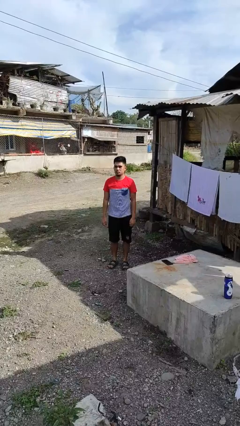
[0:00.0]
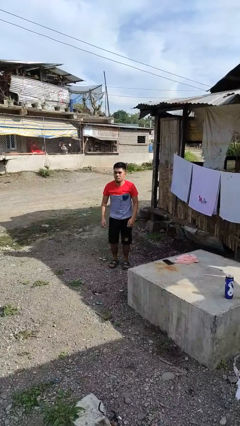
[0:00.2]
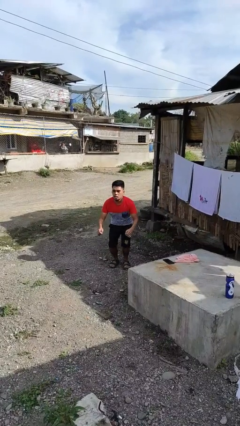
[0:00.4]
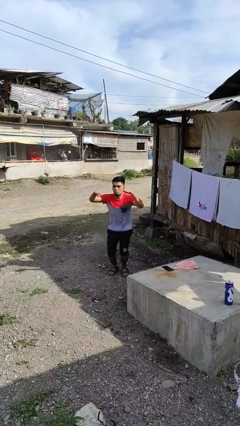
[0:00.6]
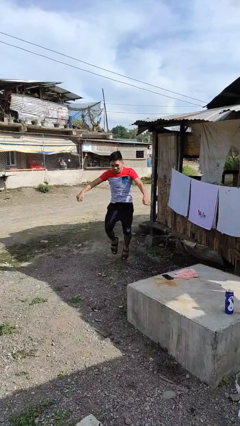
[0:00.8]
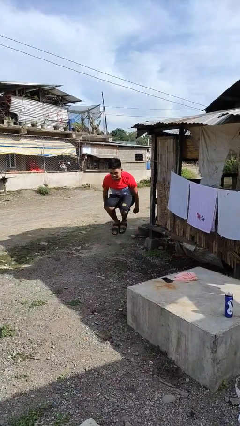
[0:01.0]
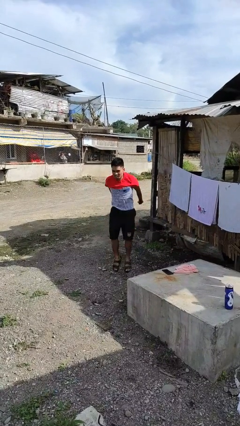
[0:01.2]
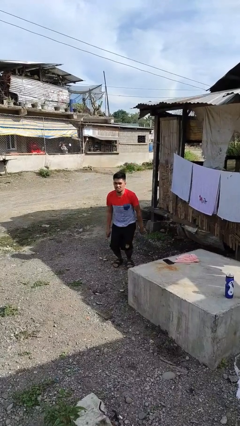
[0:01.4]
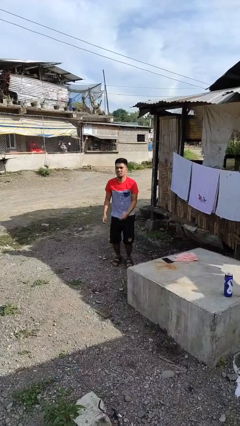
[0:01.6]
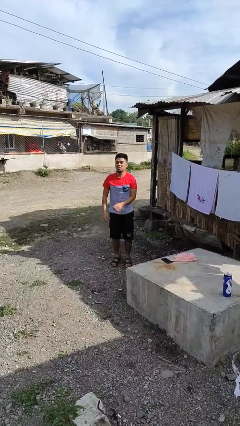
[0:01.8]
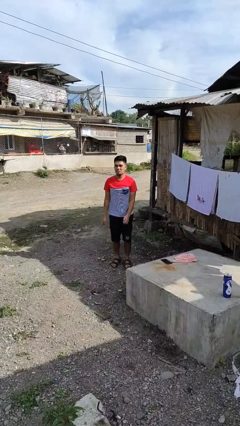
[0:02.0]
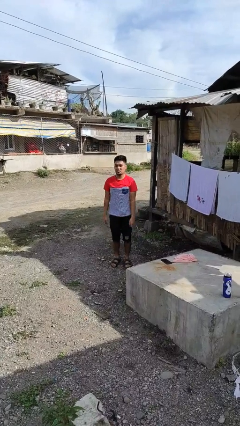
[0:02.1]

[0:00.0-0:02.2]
person jumps

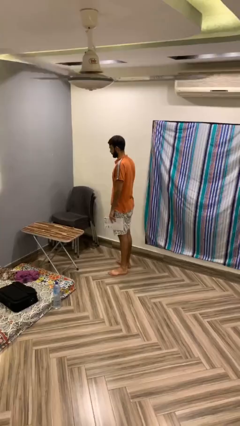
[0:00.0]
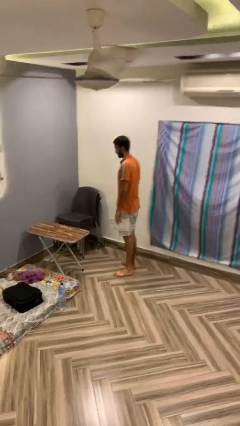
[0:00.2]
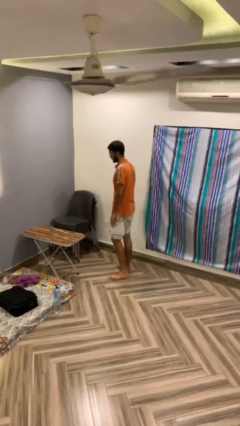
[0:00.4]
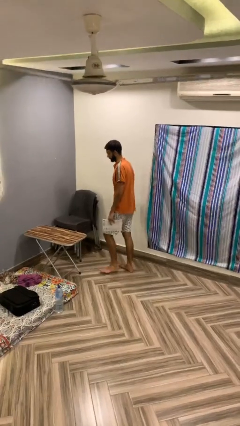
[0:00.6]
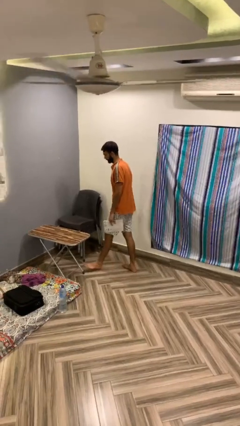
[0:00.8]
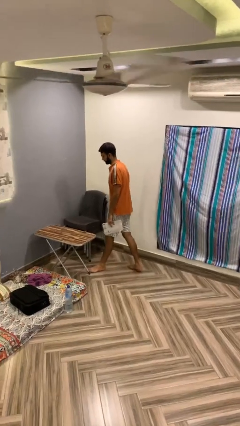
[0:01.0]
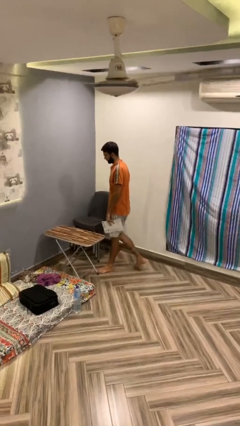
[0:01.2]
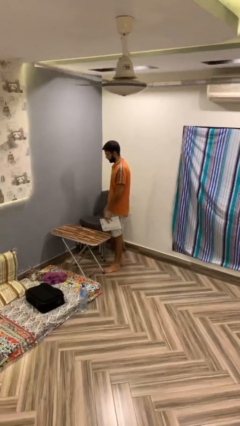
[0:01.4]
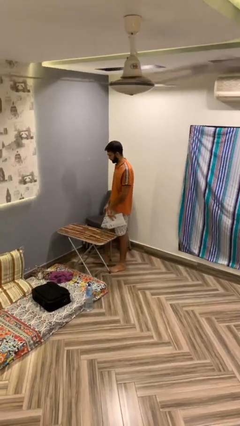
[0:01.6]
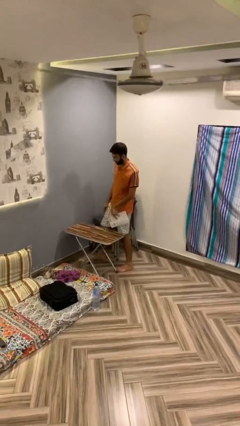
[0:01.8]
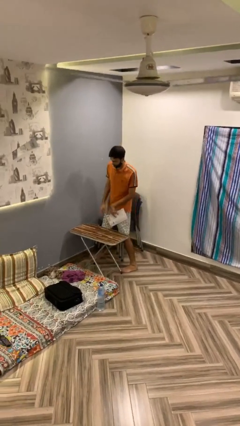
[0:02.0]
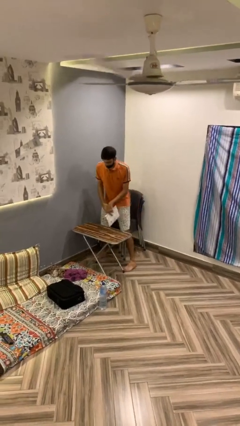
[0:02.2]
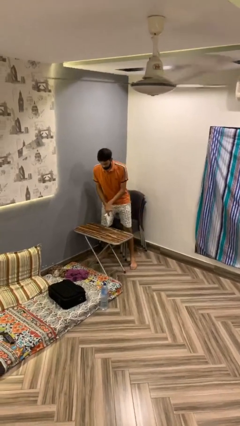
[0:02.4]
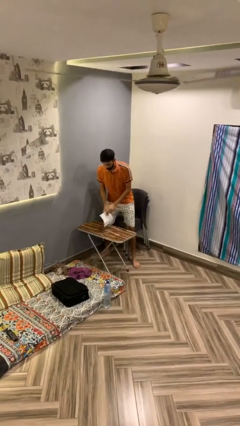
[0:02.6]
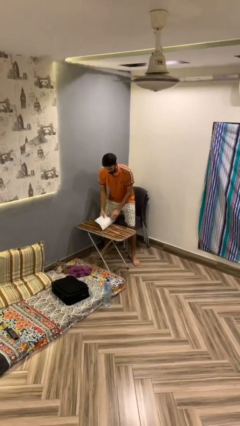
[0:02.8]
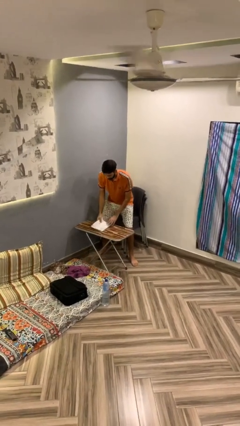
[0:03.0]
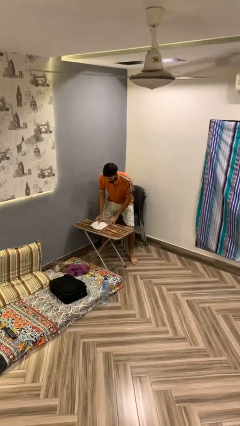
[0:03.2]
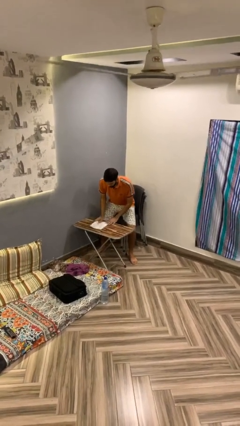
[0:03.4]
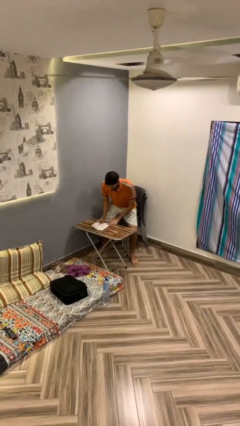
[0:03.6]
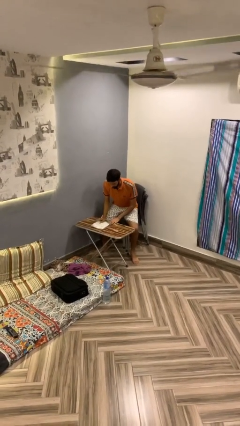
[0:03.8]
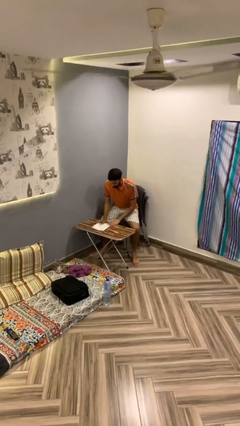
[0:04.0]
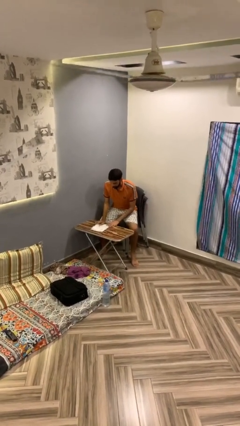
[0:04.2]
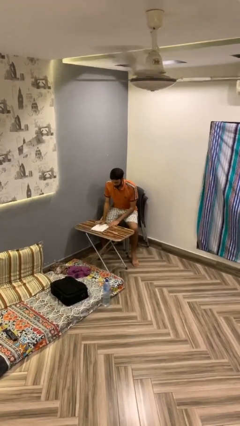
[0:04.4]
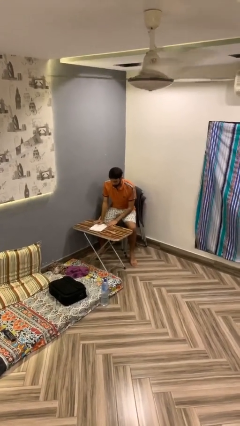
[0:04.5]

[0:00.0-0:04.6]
person sits down

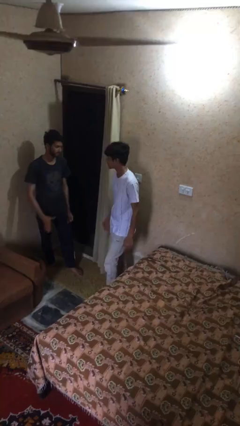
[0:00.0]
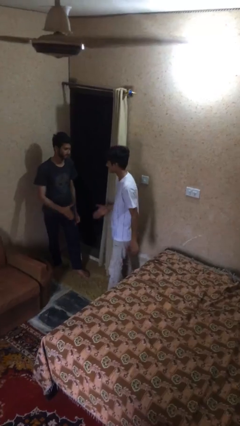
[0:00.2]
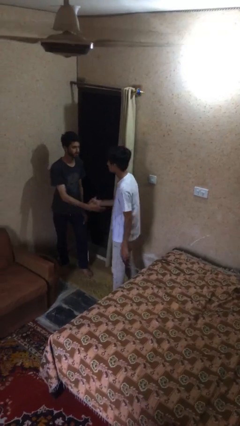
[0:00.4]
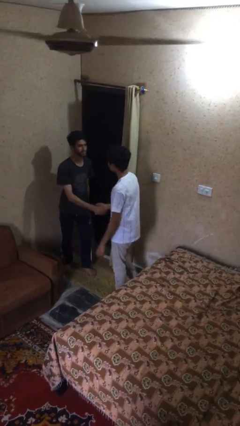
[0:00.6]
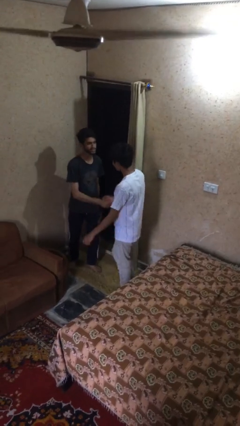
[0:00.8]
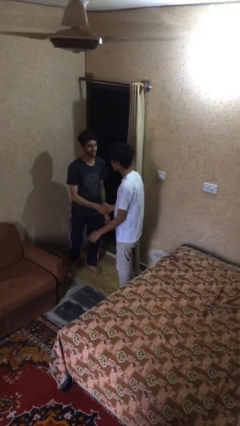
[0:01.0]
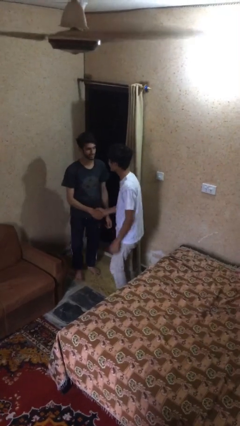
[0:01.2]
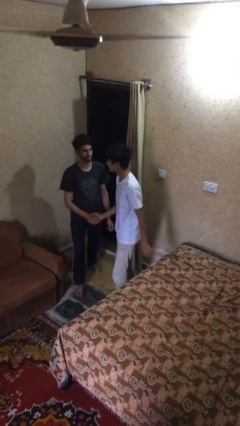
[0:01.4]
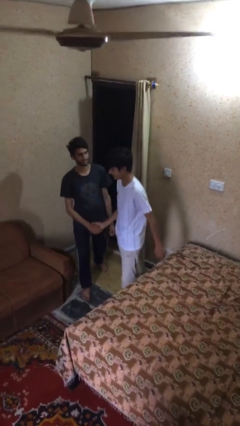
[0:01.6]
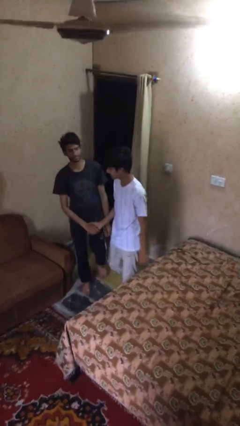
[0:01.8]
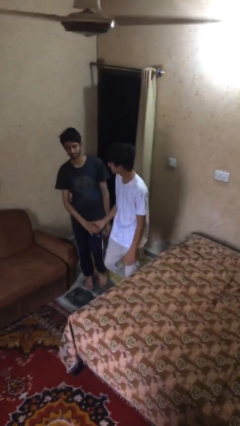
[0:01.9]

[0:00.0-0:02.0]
person shakes hand

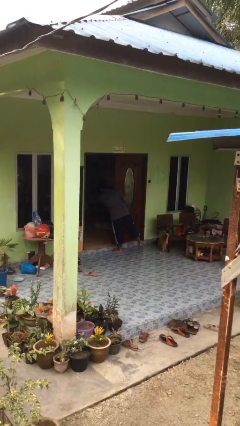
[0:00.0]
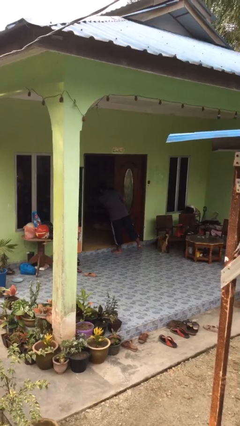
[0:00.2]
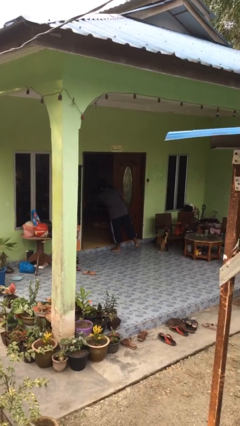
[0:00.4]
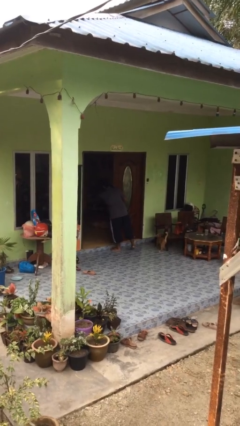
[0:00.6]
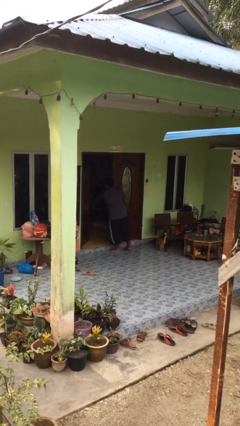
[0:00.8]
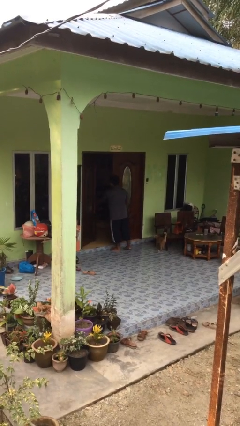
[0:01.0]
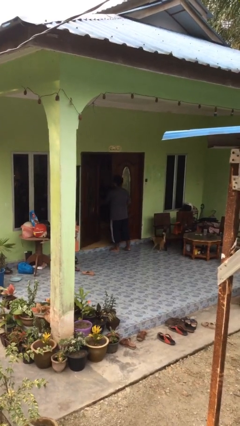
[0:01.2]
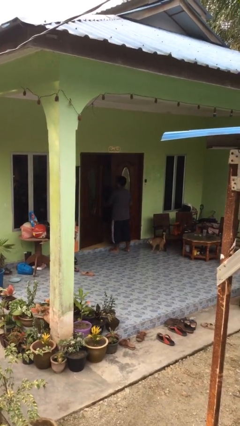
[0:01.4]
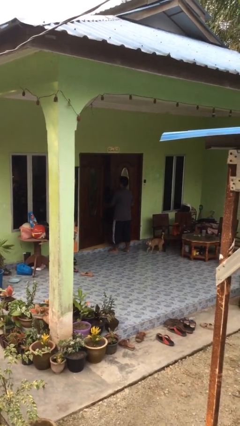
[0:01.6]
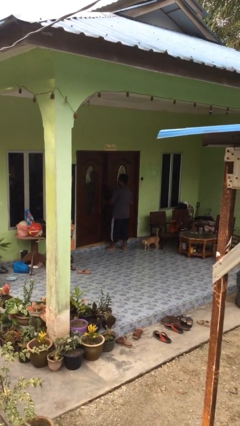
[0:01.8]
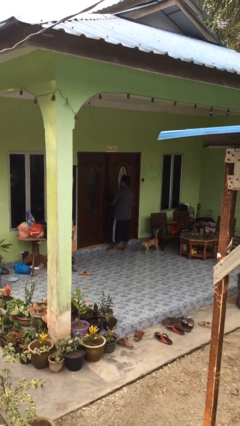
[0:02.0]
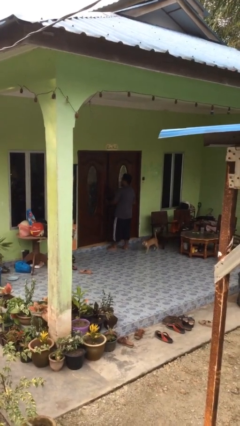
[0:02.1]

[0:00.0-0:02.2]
person closes facility door

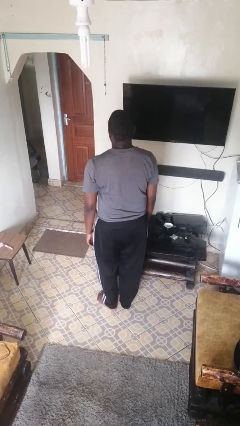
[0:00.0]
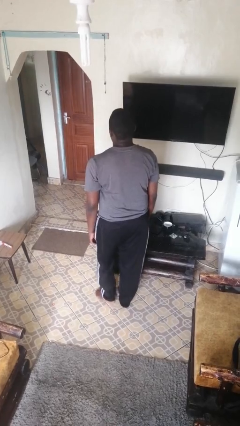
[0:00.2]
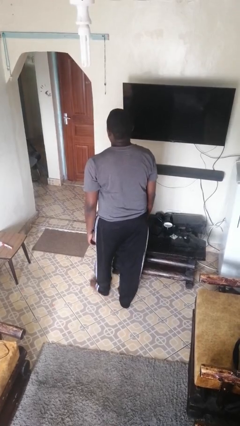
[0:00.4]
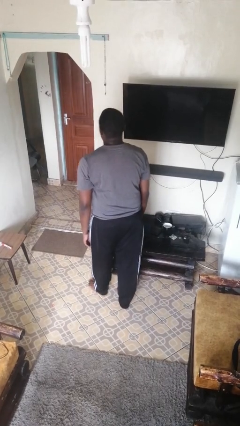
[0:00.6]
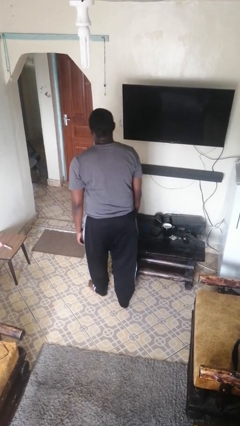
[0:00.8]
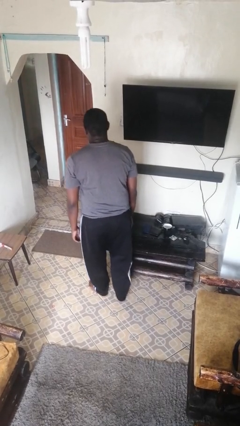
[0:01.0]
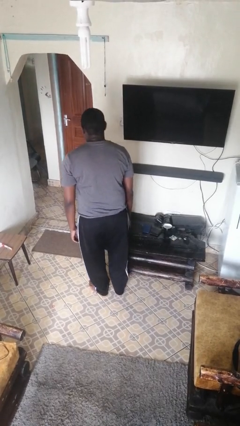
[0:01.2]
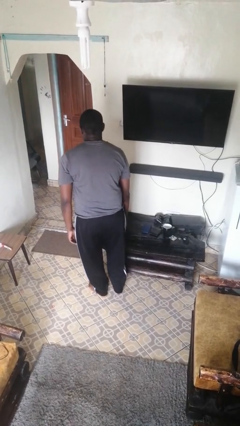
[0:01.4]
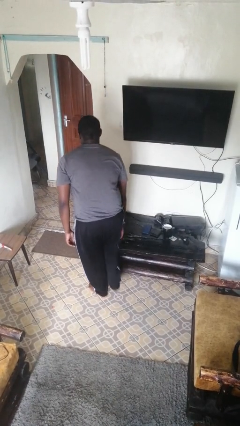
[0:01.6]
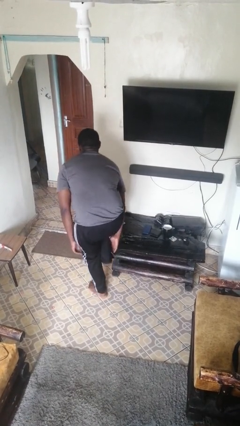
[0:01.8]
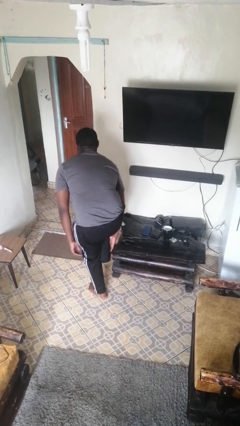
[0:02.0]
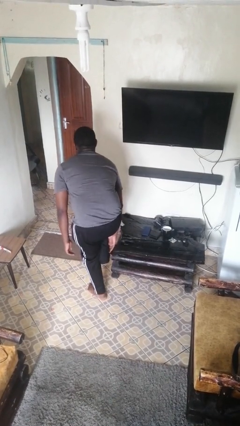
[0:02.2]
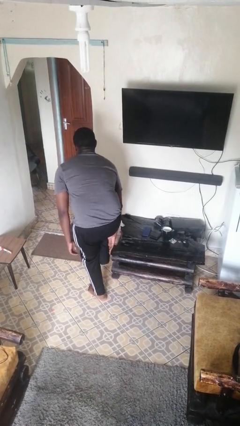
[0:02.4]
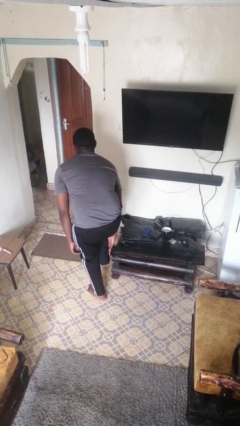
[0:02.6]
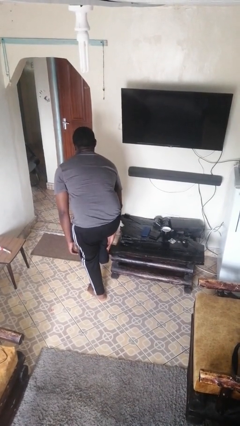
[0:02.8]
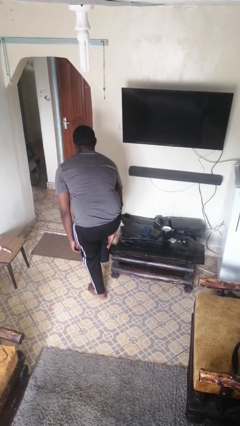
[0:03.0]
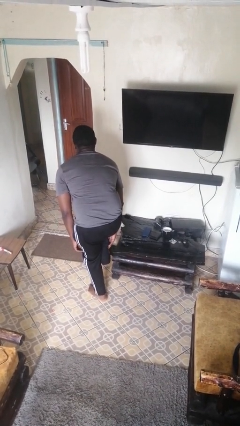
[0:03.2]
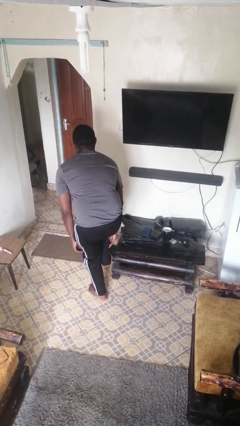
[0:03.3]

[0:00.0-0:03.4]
person bumps into table

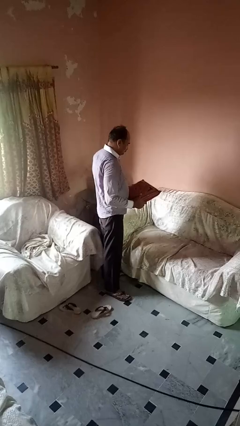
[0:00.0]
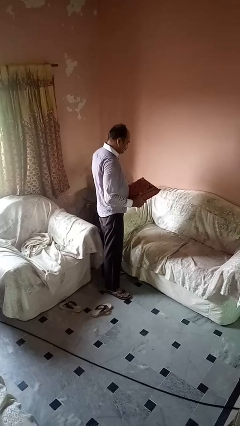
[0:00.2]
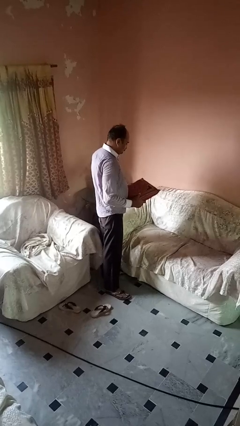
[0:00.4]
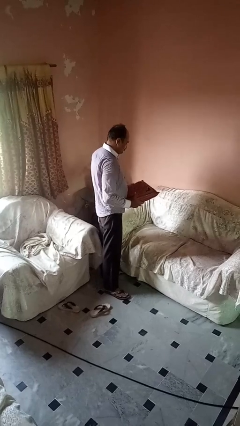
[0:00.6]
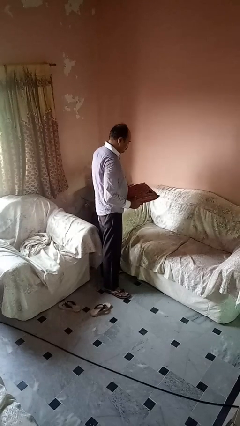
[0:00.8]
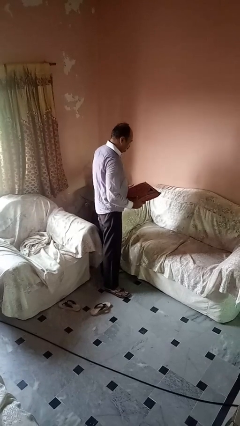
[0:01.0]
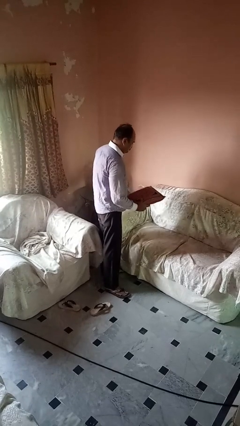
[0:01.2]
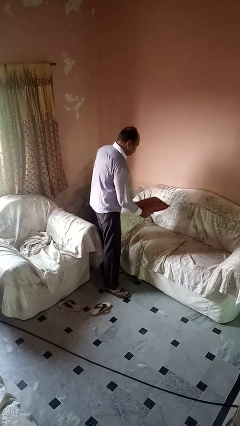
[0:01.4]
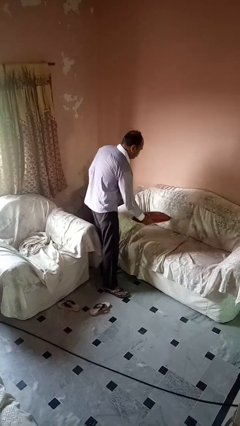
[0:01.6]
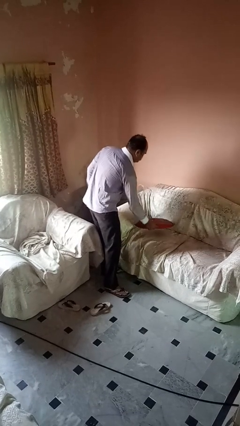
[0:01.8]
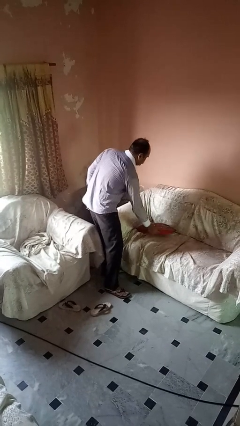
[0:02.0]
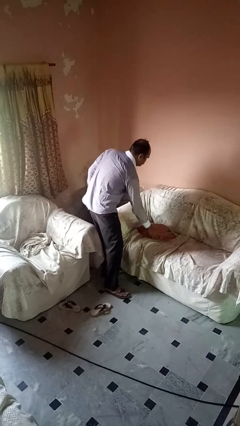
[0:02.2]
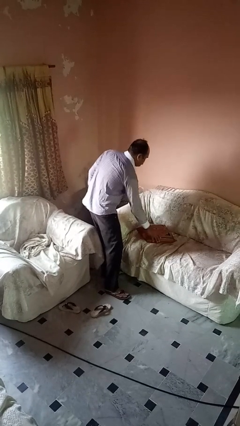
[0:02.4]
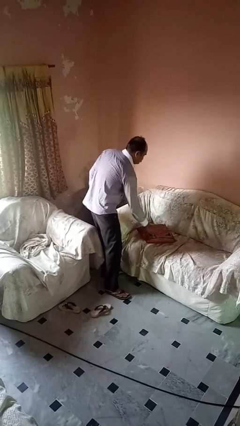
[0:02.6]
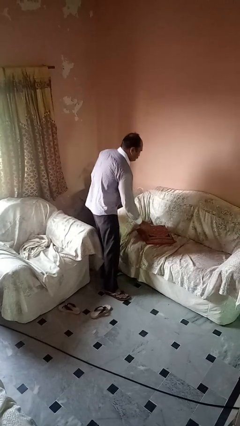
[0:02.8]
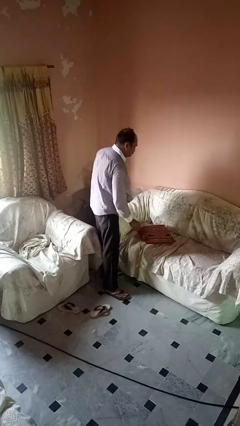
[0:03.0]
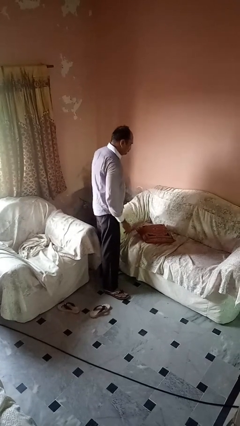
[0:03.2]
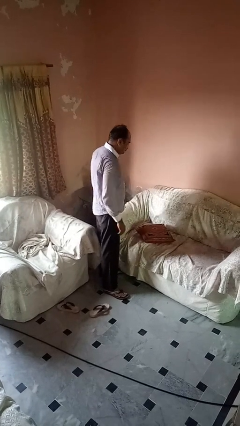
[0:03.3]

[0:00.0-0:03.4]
person puts down object on couch
